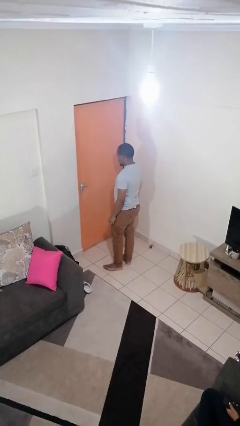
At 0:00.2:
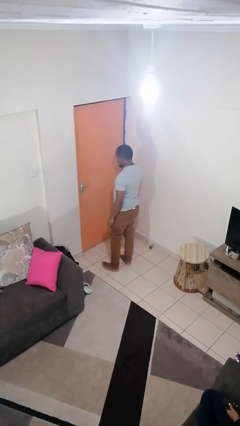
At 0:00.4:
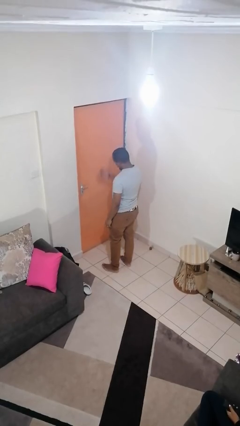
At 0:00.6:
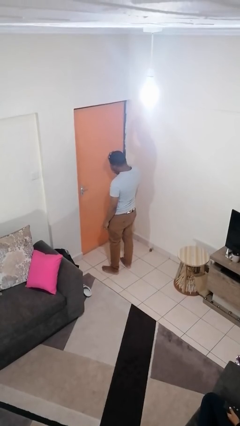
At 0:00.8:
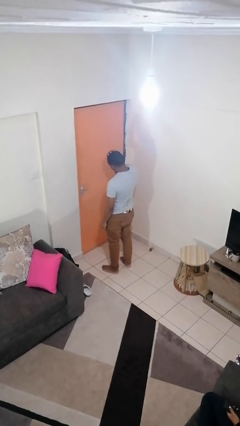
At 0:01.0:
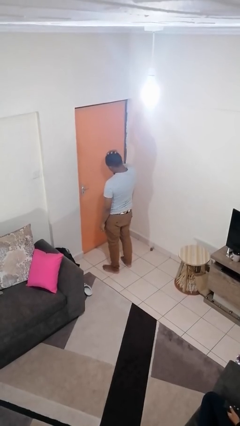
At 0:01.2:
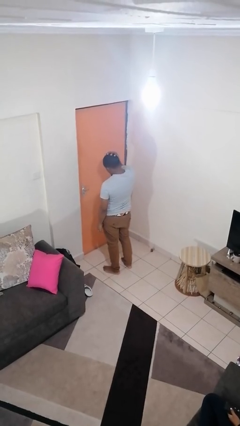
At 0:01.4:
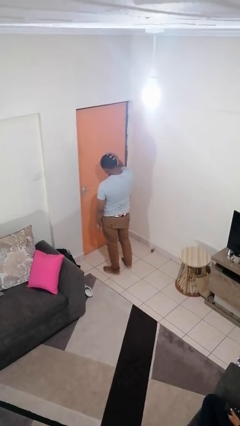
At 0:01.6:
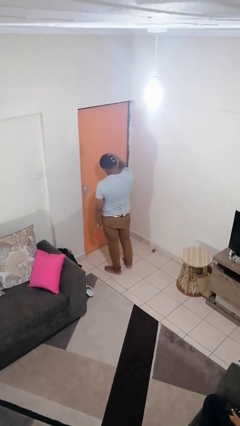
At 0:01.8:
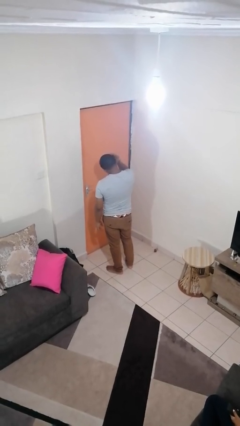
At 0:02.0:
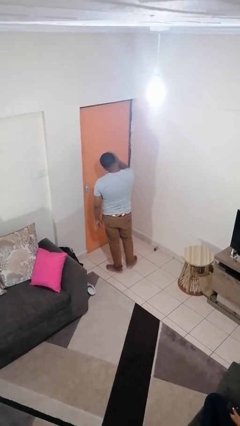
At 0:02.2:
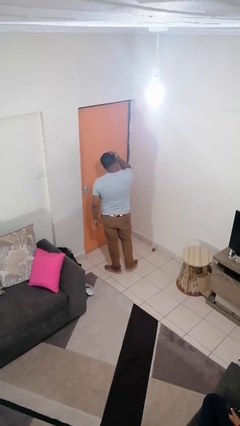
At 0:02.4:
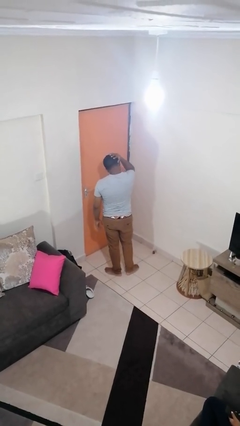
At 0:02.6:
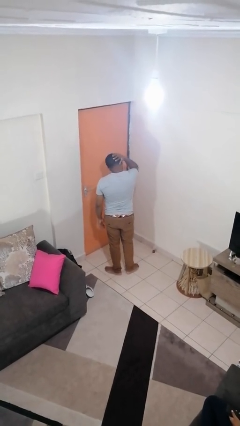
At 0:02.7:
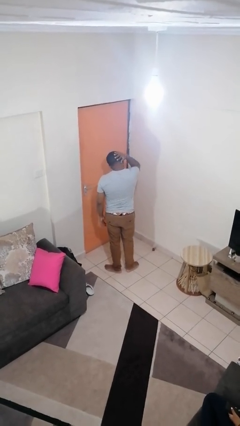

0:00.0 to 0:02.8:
person strokes hair

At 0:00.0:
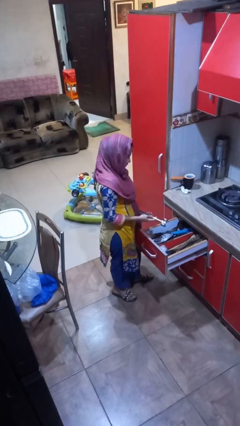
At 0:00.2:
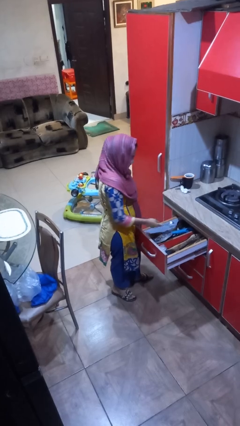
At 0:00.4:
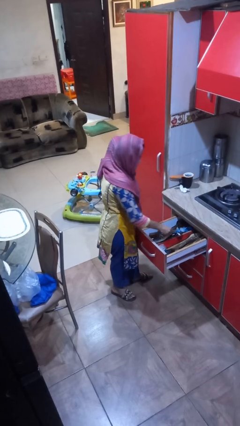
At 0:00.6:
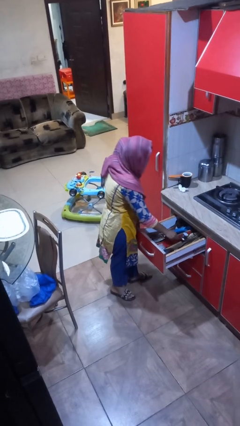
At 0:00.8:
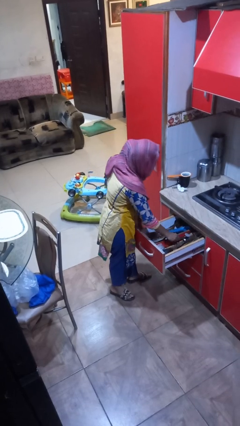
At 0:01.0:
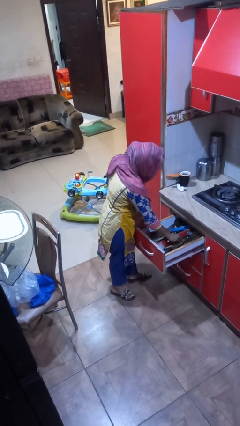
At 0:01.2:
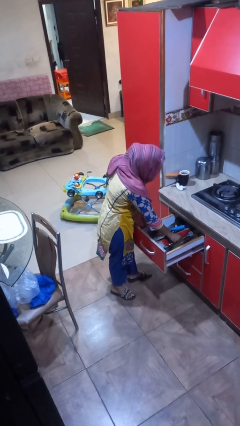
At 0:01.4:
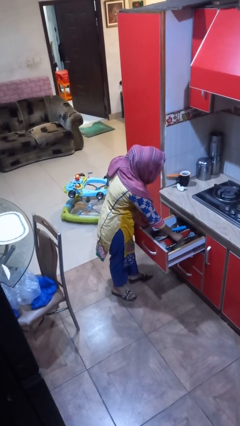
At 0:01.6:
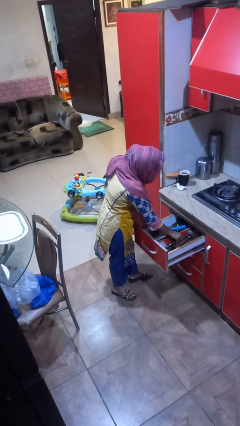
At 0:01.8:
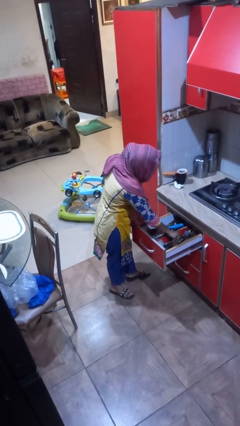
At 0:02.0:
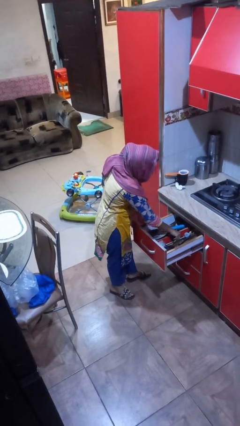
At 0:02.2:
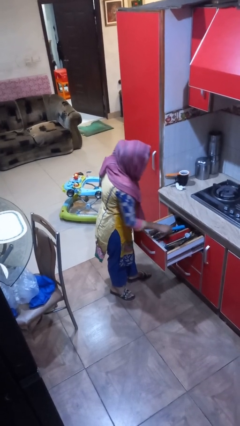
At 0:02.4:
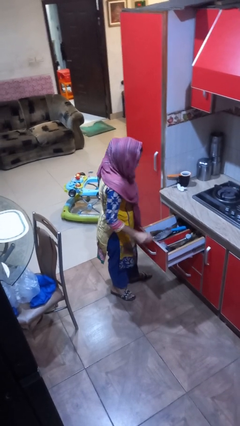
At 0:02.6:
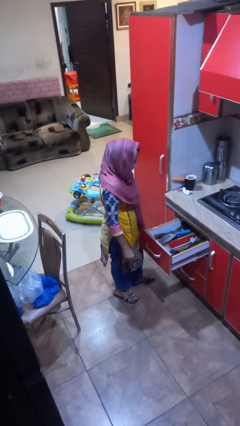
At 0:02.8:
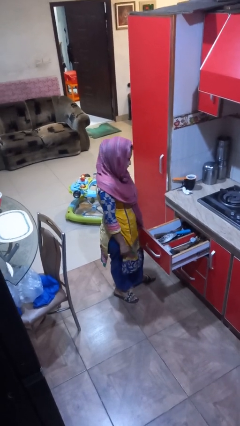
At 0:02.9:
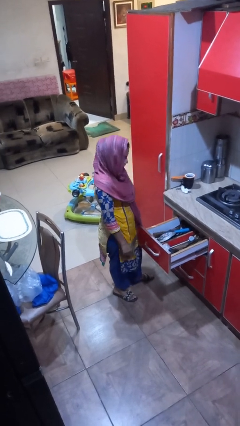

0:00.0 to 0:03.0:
person puts object into kitchen drawer

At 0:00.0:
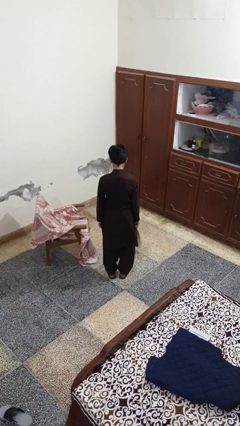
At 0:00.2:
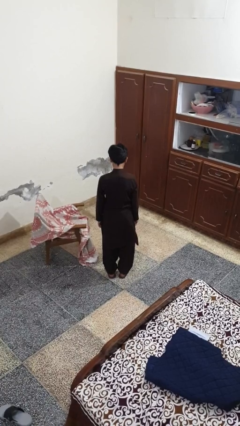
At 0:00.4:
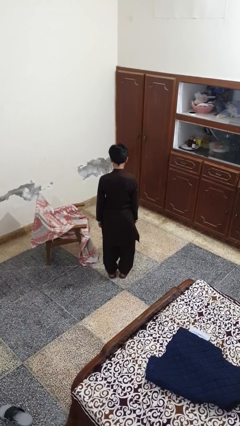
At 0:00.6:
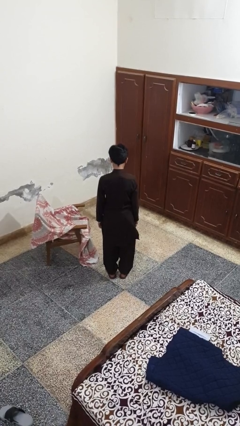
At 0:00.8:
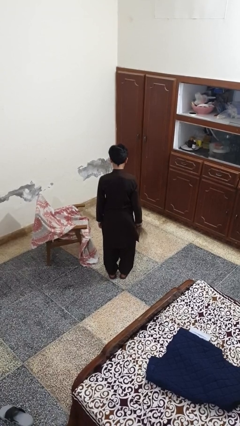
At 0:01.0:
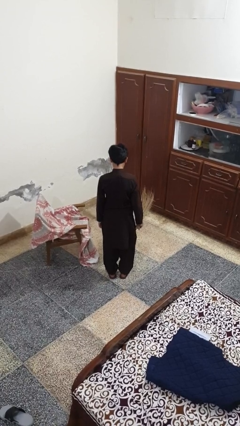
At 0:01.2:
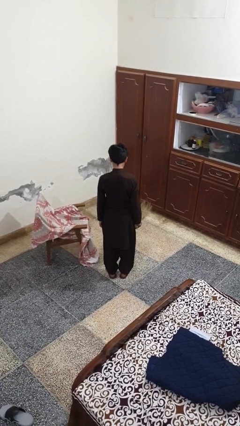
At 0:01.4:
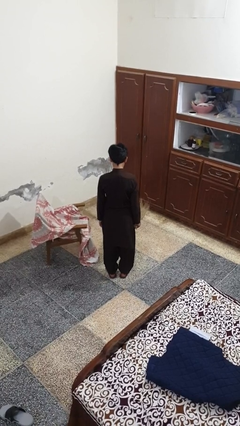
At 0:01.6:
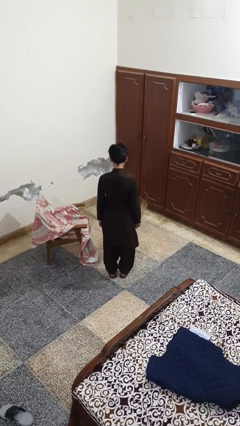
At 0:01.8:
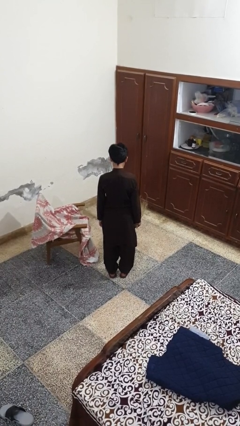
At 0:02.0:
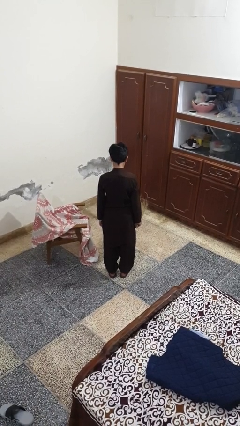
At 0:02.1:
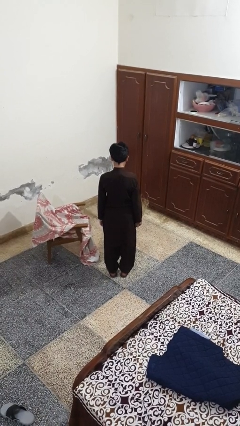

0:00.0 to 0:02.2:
person sweeps floor

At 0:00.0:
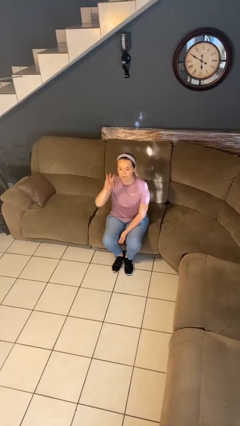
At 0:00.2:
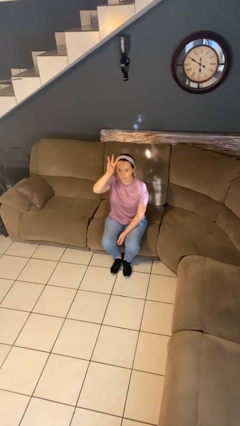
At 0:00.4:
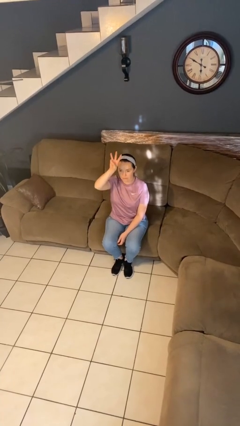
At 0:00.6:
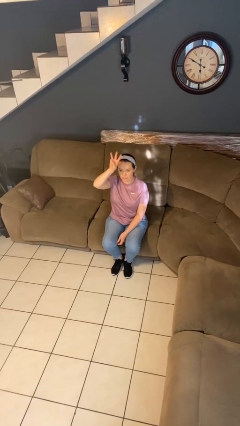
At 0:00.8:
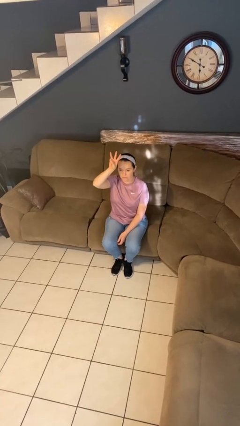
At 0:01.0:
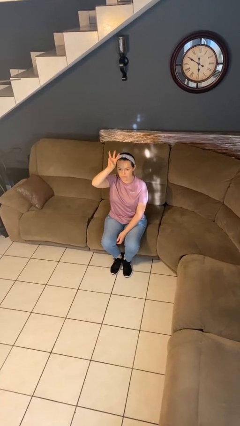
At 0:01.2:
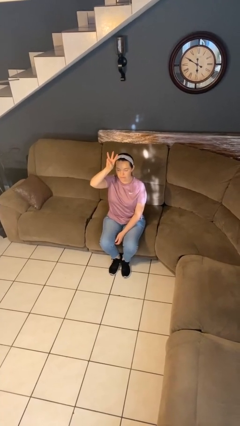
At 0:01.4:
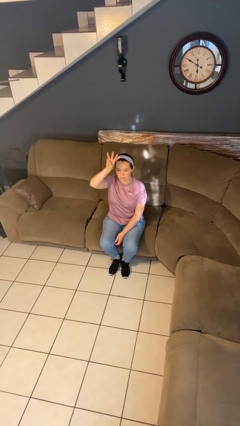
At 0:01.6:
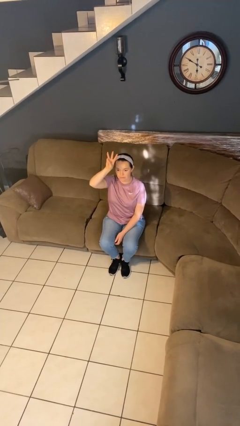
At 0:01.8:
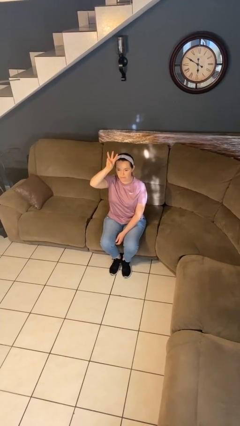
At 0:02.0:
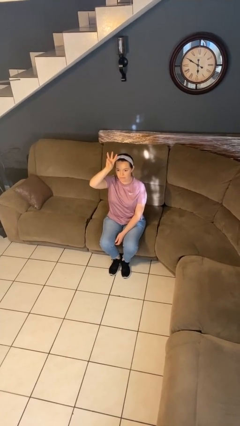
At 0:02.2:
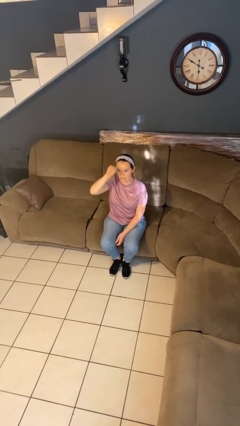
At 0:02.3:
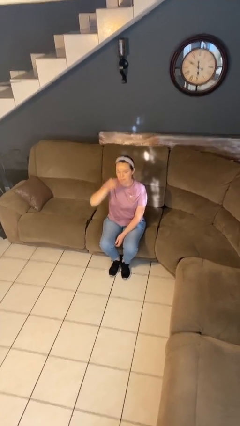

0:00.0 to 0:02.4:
person gestures number three

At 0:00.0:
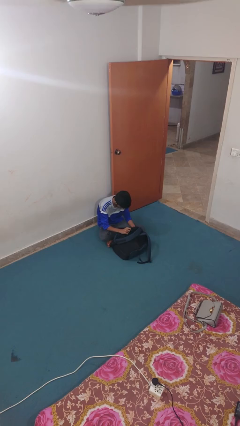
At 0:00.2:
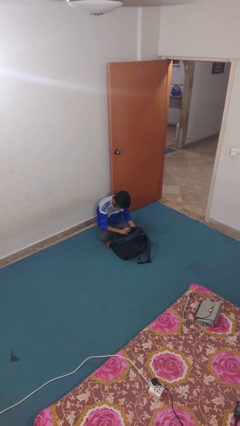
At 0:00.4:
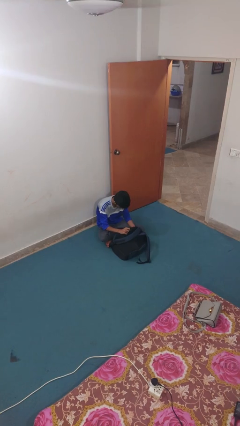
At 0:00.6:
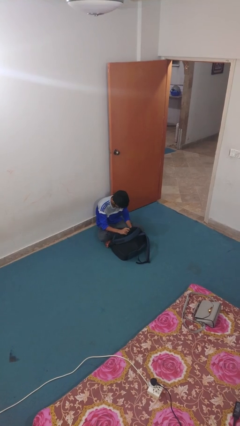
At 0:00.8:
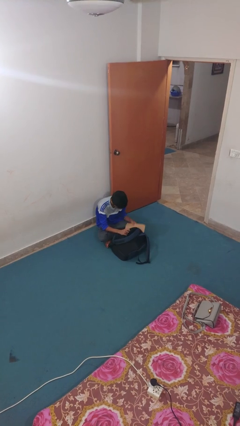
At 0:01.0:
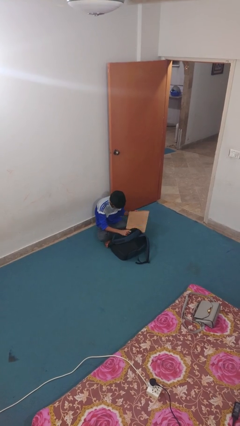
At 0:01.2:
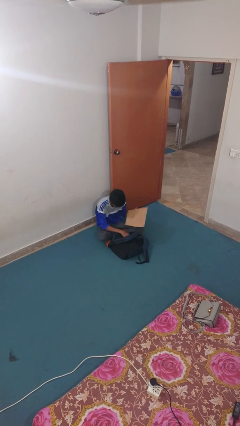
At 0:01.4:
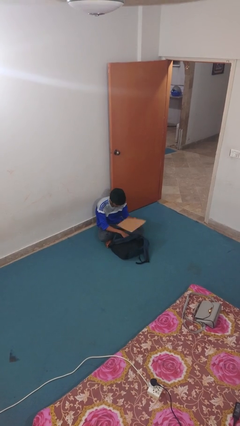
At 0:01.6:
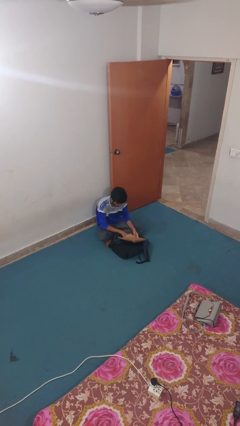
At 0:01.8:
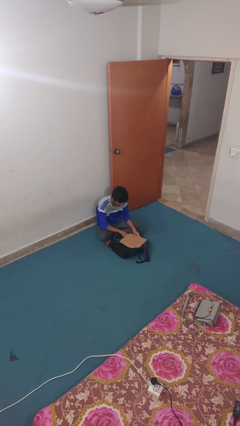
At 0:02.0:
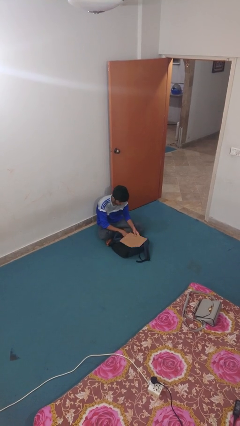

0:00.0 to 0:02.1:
person takes object from backpack

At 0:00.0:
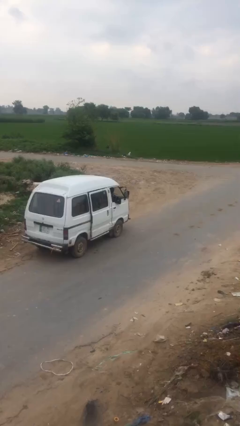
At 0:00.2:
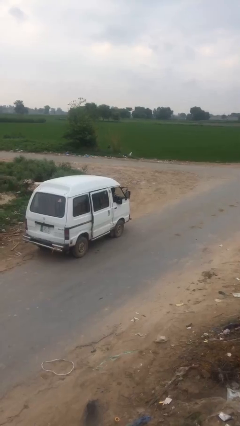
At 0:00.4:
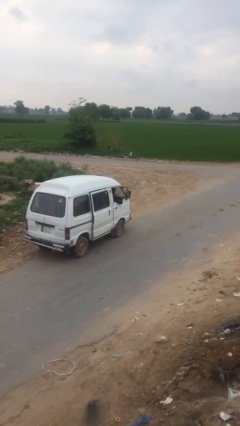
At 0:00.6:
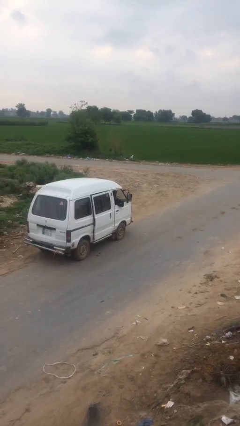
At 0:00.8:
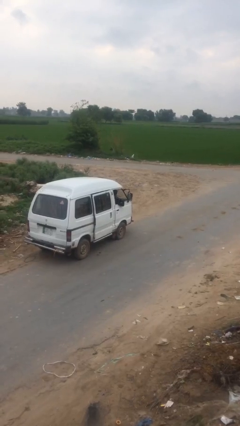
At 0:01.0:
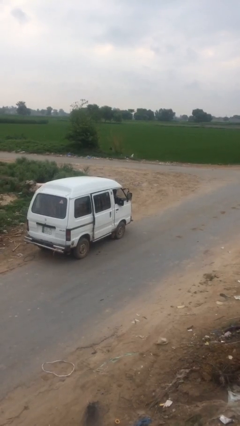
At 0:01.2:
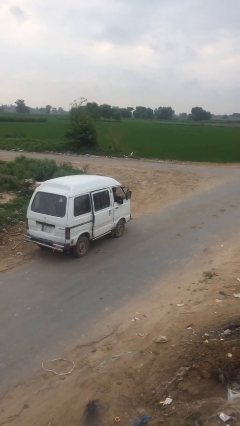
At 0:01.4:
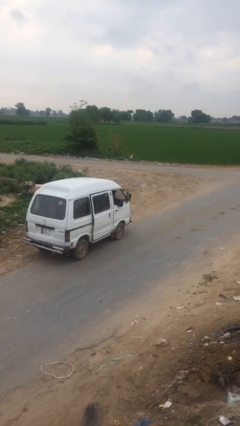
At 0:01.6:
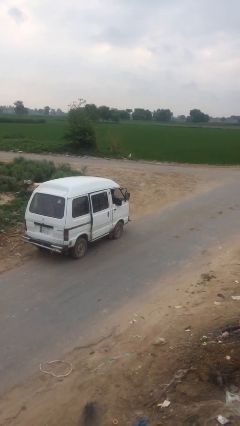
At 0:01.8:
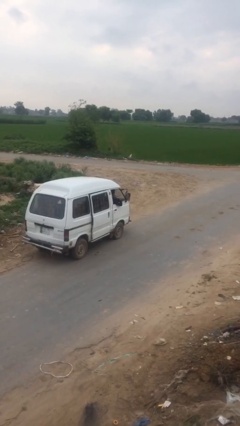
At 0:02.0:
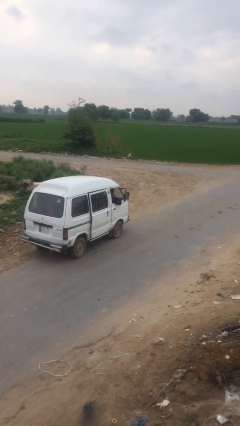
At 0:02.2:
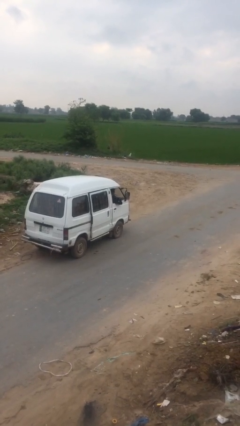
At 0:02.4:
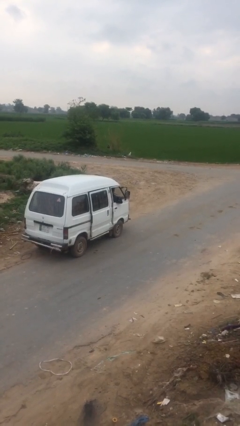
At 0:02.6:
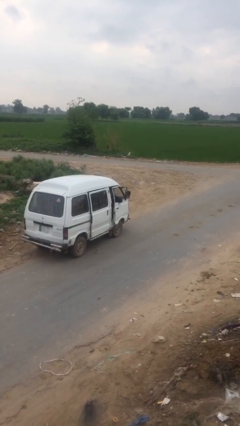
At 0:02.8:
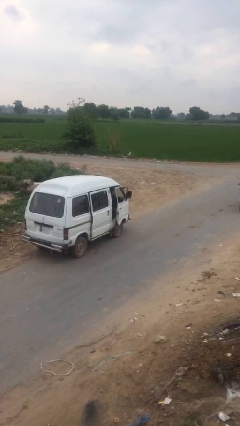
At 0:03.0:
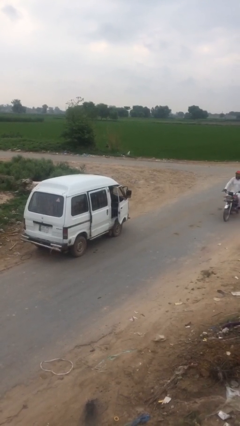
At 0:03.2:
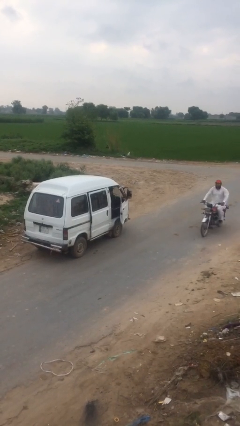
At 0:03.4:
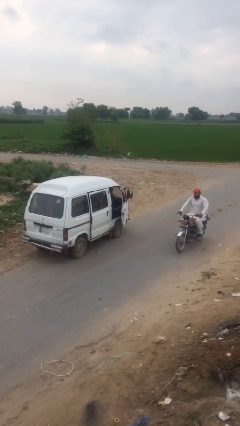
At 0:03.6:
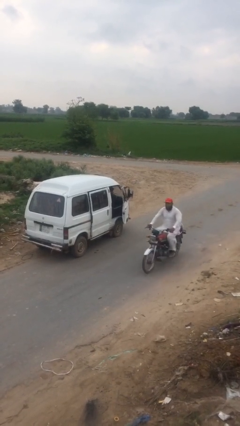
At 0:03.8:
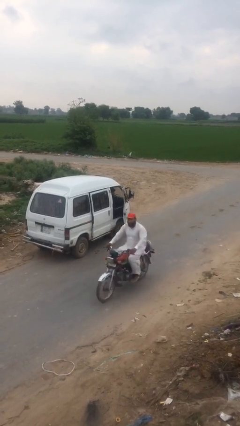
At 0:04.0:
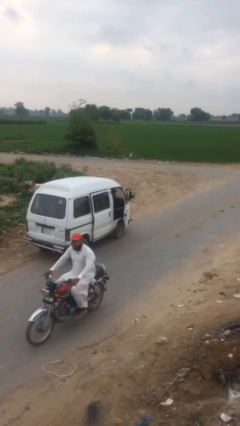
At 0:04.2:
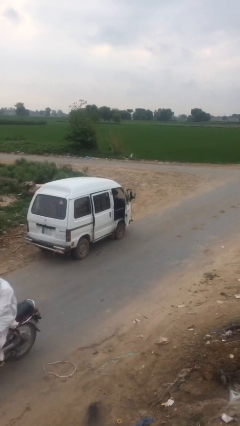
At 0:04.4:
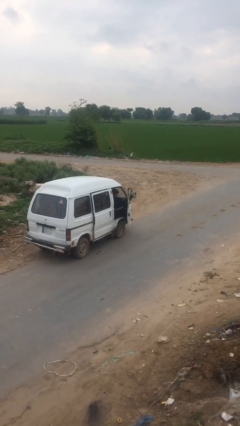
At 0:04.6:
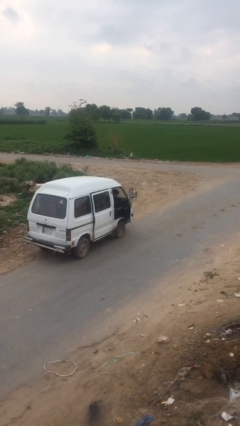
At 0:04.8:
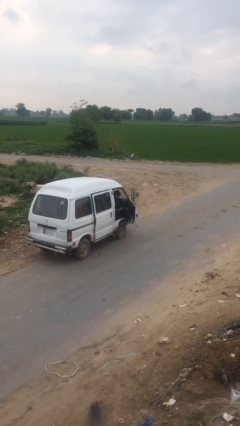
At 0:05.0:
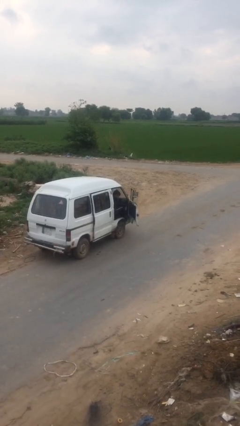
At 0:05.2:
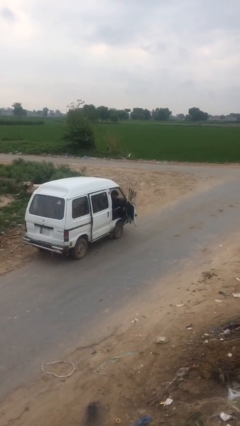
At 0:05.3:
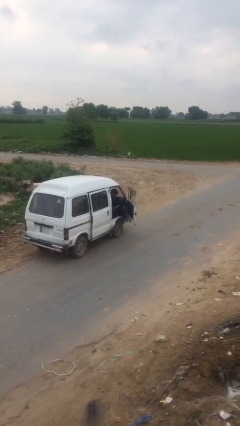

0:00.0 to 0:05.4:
person opens car door
